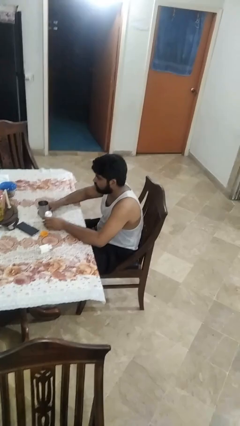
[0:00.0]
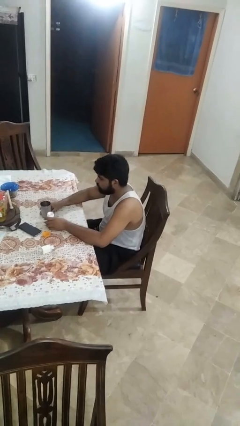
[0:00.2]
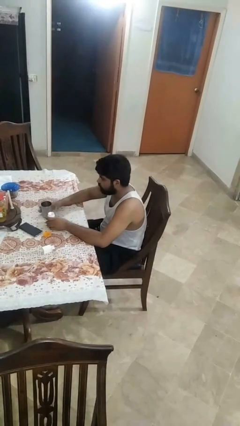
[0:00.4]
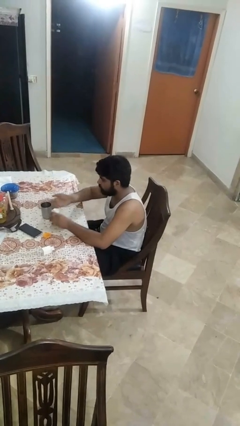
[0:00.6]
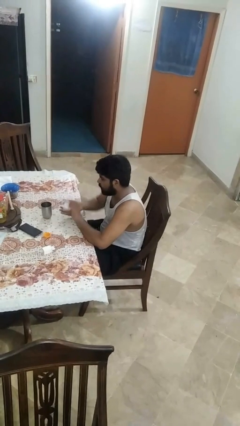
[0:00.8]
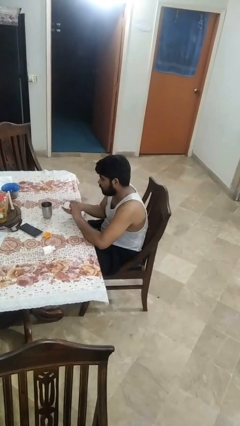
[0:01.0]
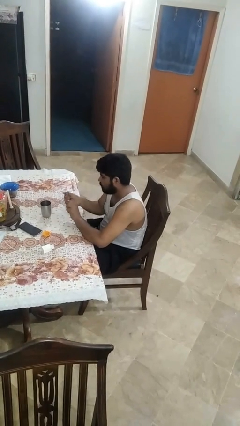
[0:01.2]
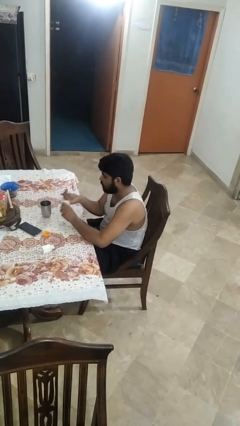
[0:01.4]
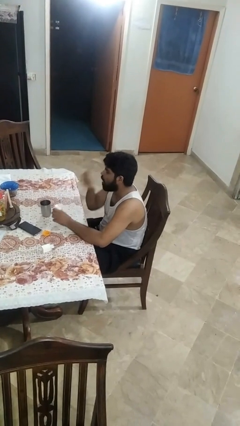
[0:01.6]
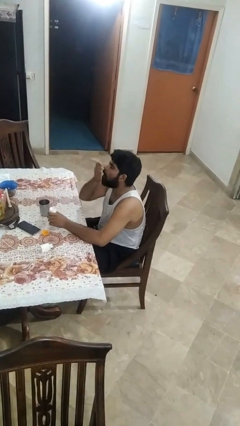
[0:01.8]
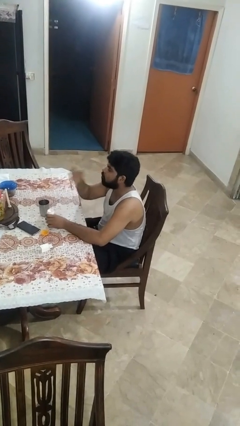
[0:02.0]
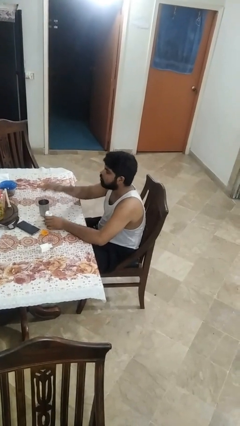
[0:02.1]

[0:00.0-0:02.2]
person takes medicine pills

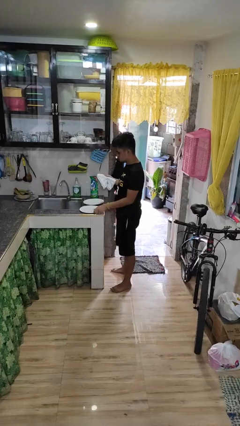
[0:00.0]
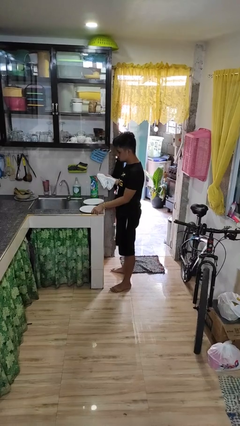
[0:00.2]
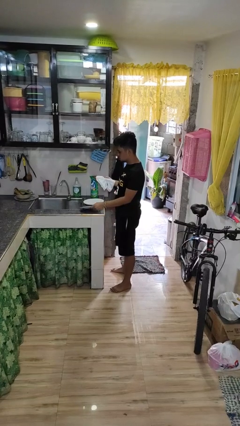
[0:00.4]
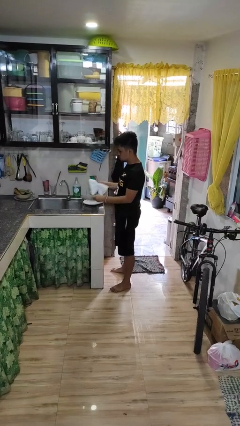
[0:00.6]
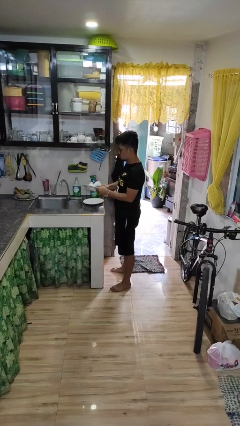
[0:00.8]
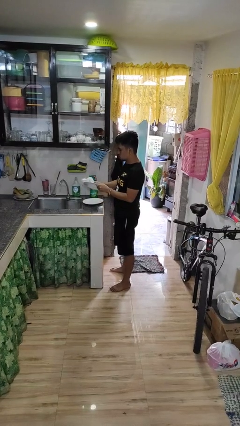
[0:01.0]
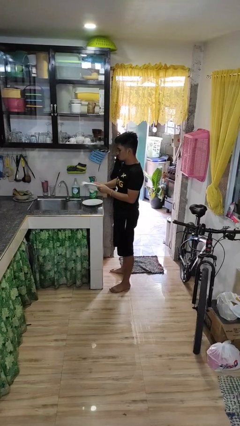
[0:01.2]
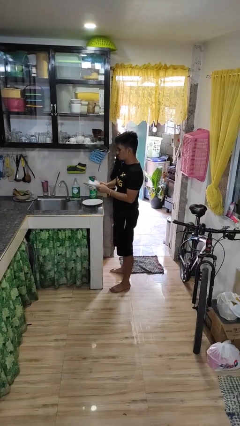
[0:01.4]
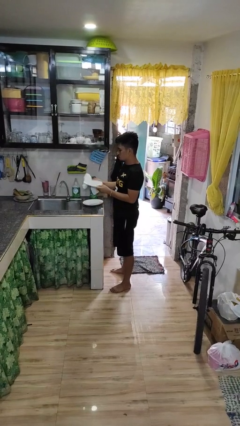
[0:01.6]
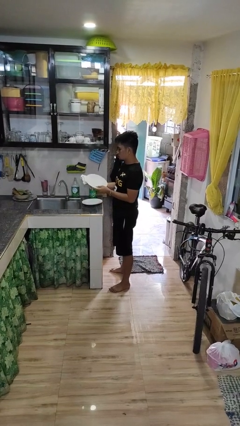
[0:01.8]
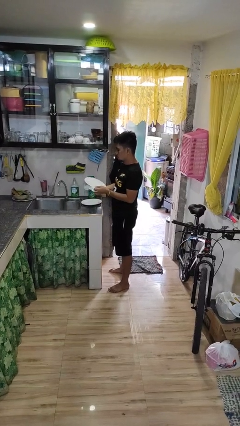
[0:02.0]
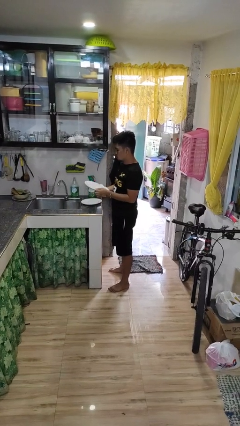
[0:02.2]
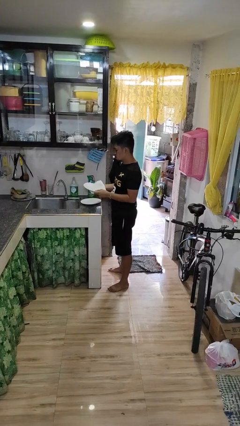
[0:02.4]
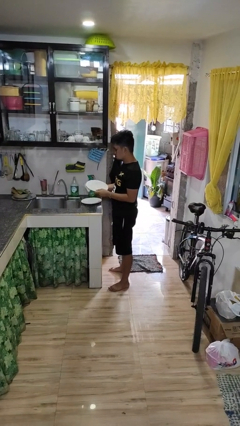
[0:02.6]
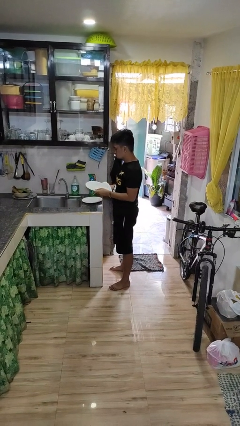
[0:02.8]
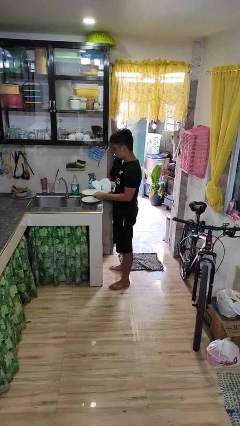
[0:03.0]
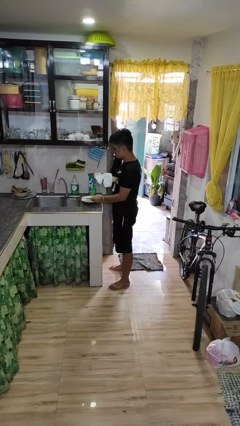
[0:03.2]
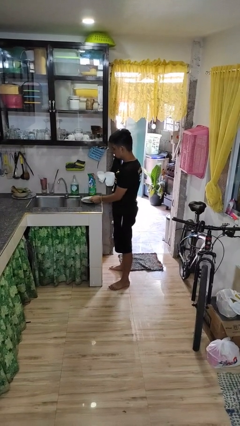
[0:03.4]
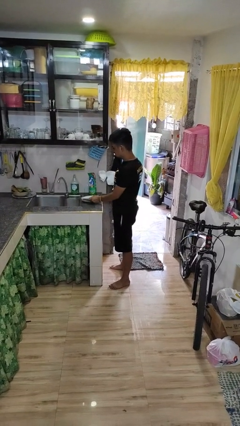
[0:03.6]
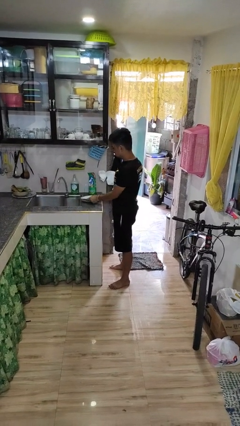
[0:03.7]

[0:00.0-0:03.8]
person dries dish

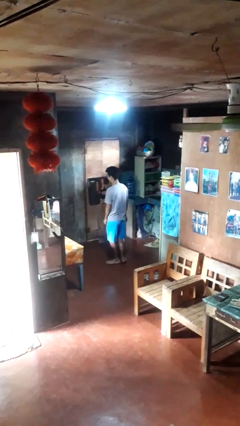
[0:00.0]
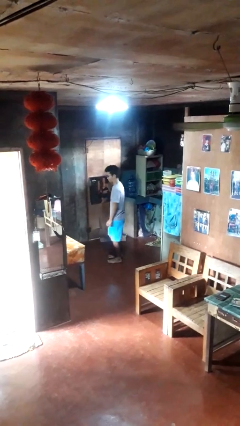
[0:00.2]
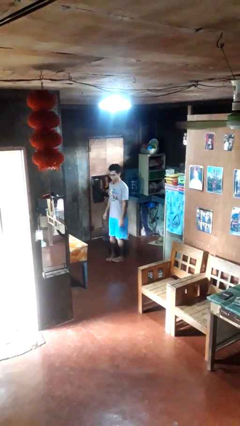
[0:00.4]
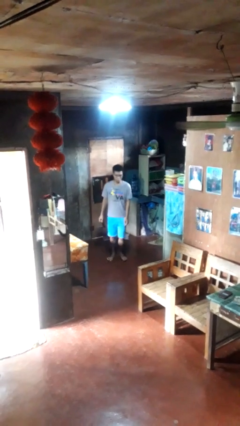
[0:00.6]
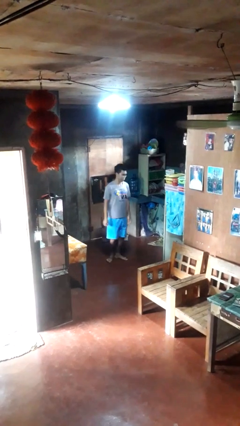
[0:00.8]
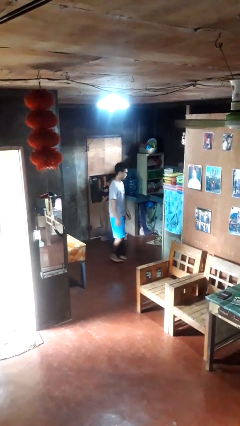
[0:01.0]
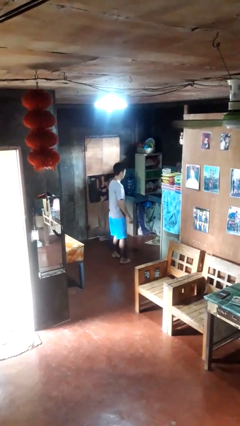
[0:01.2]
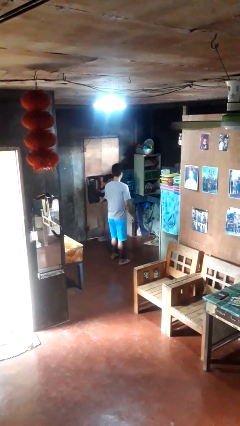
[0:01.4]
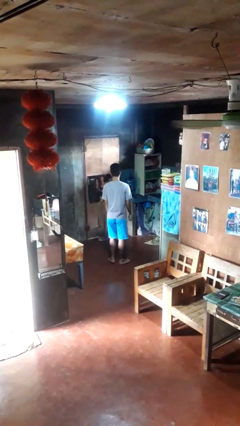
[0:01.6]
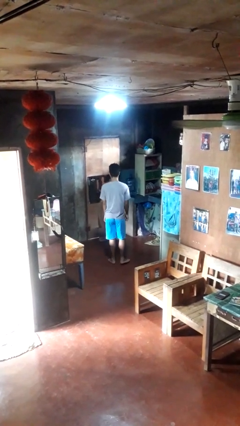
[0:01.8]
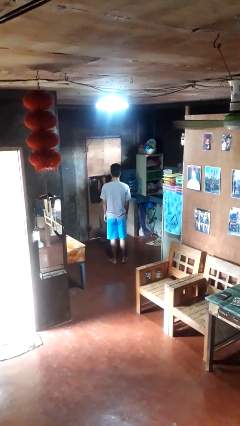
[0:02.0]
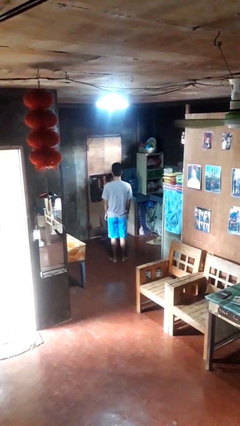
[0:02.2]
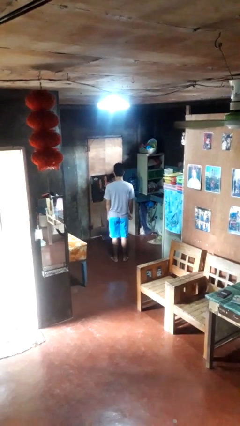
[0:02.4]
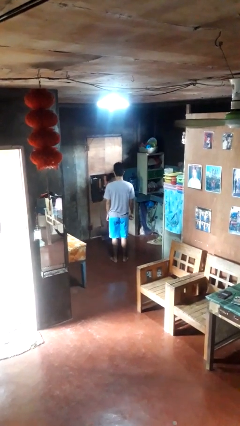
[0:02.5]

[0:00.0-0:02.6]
person twirls

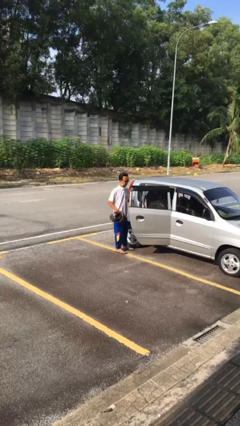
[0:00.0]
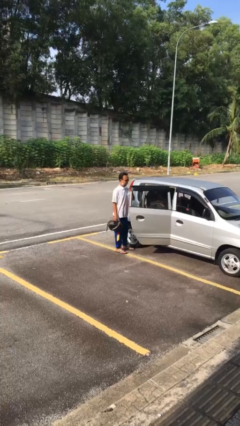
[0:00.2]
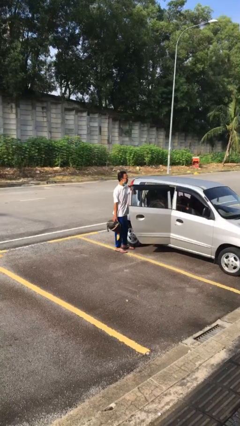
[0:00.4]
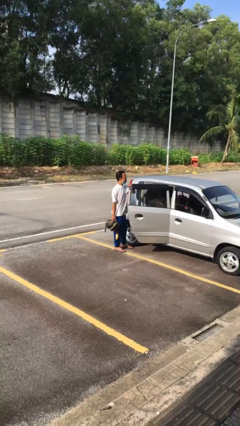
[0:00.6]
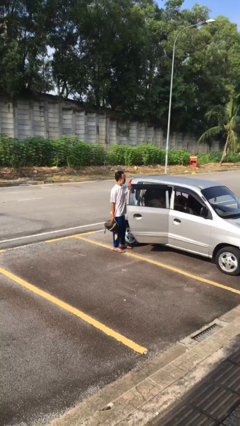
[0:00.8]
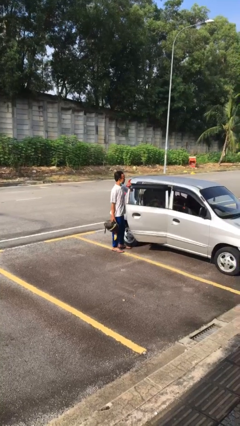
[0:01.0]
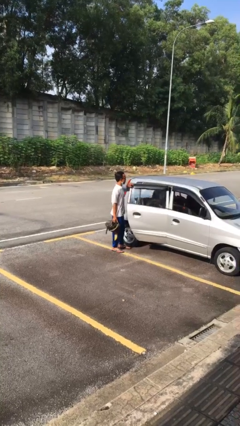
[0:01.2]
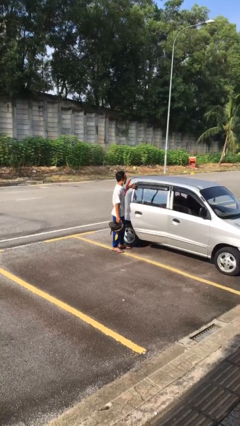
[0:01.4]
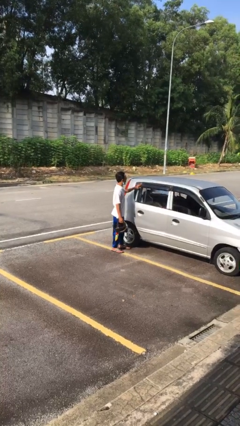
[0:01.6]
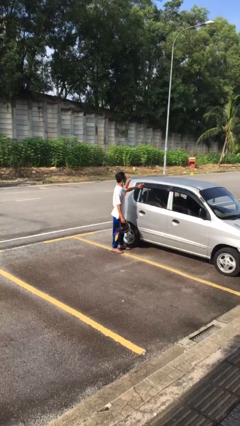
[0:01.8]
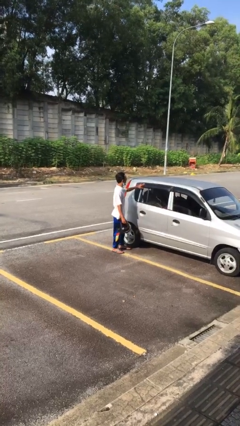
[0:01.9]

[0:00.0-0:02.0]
person closes car door

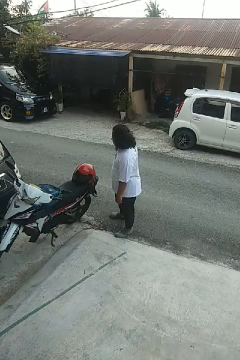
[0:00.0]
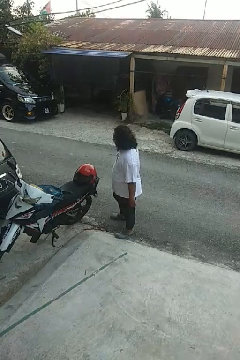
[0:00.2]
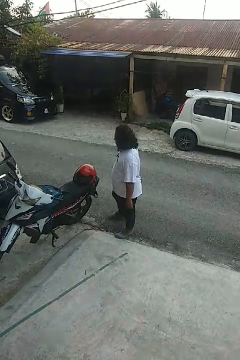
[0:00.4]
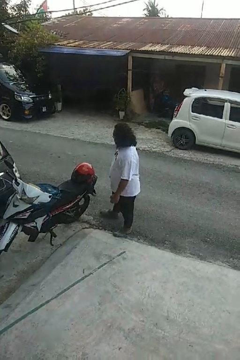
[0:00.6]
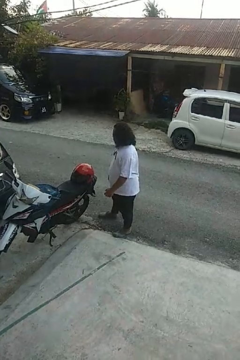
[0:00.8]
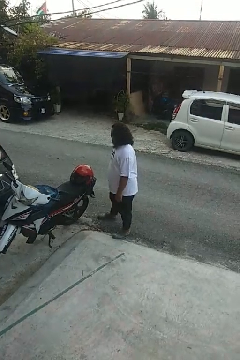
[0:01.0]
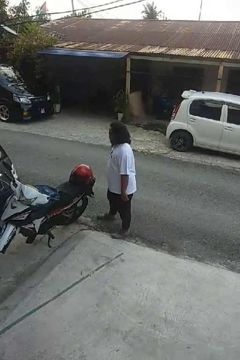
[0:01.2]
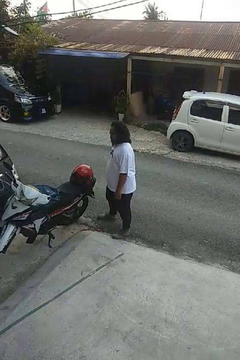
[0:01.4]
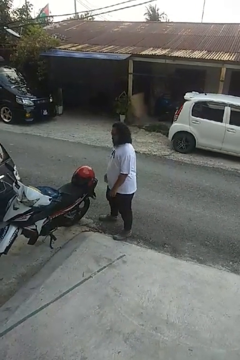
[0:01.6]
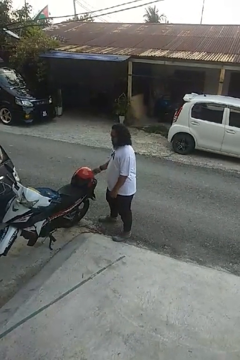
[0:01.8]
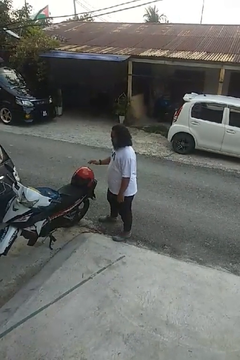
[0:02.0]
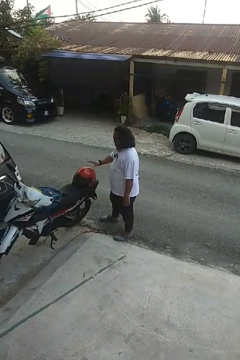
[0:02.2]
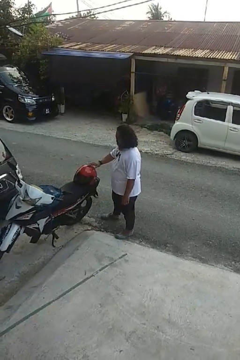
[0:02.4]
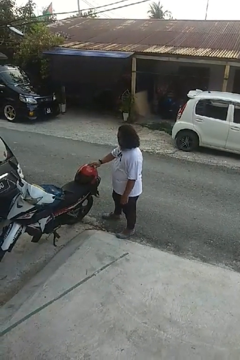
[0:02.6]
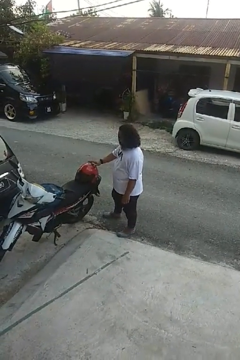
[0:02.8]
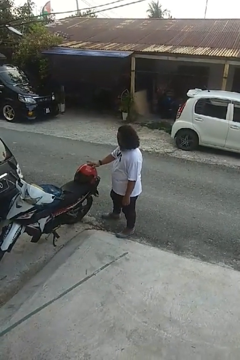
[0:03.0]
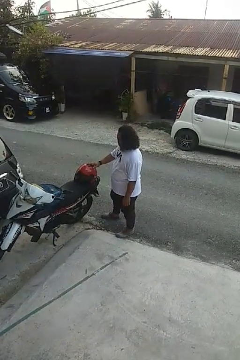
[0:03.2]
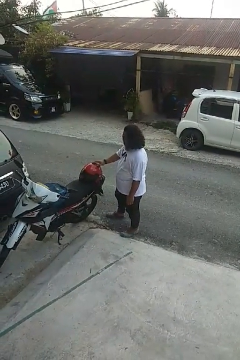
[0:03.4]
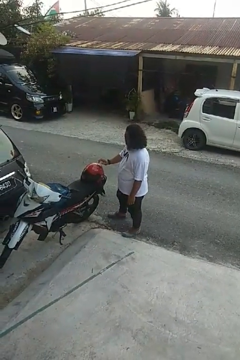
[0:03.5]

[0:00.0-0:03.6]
person taps object with finger

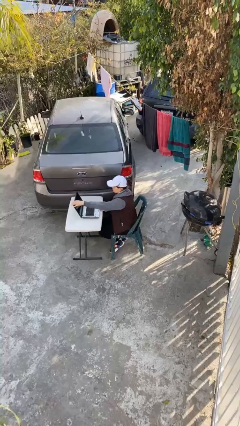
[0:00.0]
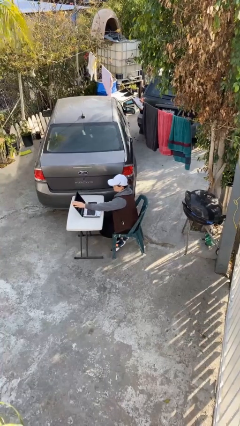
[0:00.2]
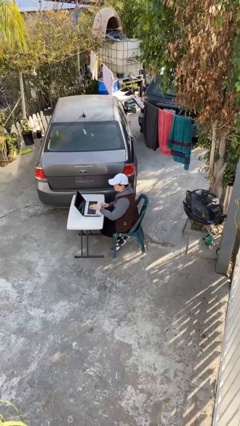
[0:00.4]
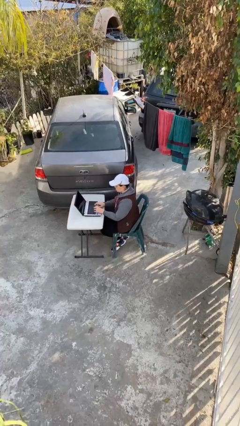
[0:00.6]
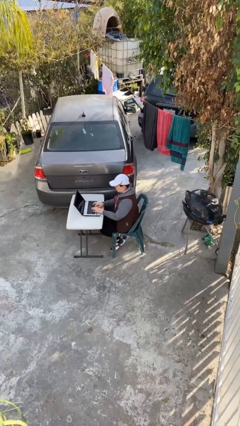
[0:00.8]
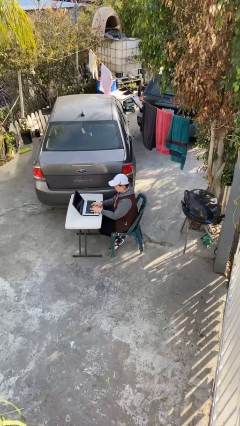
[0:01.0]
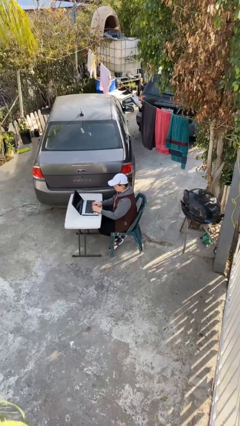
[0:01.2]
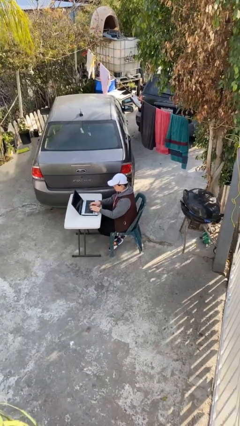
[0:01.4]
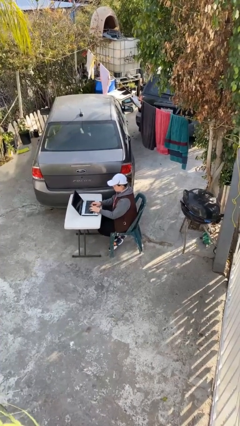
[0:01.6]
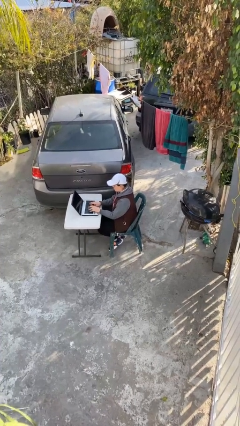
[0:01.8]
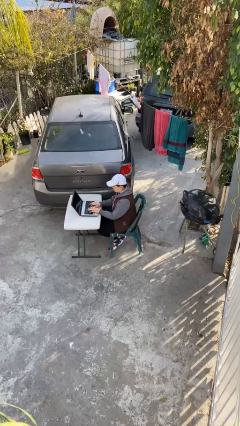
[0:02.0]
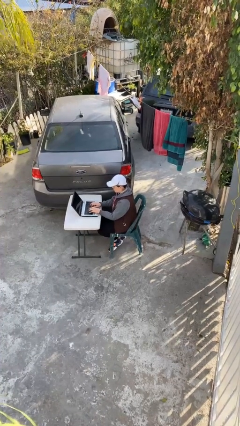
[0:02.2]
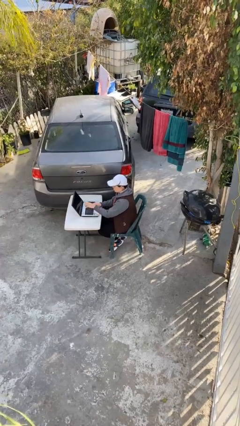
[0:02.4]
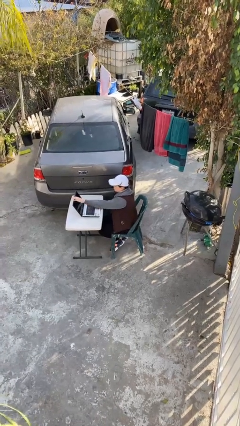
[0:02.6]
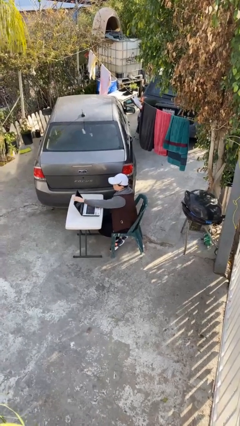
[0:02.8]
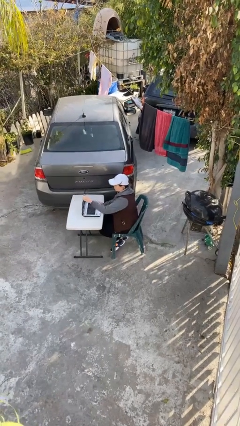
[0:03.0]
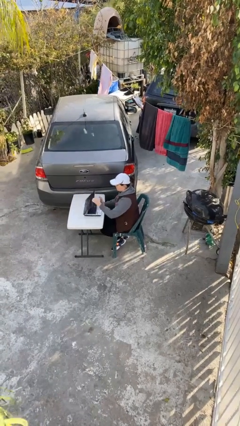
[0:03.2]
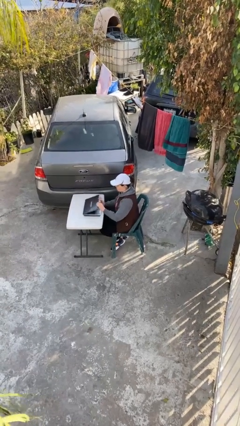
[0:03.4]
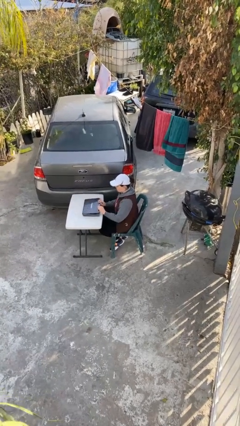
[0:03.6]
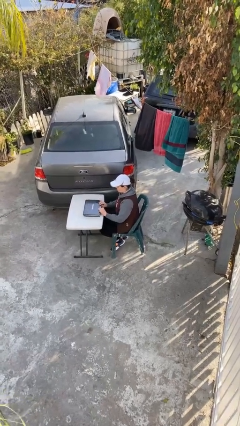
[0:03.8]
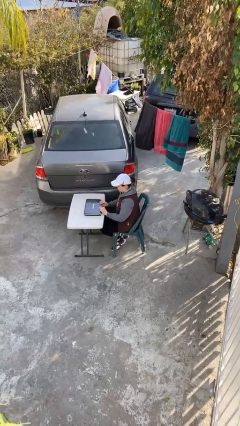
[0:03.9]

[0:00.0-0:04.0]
person interacts with laptop
